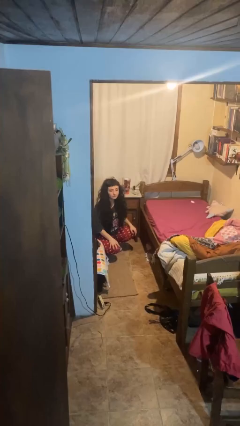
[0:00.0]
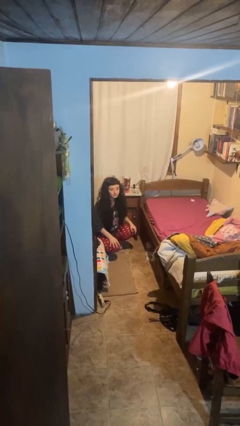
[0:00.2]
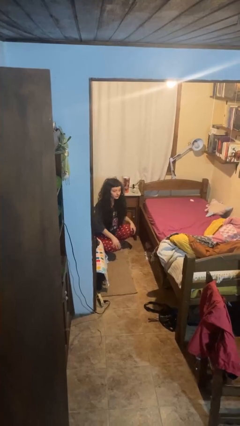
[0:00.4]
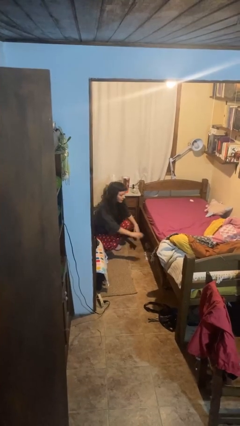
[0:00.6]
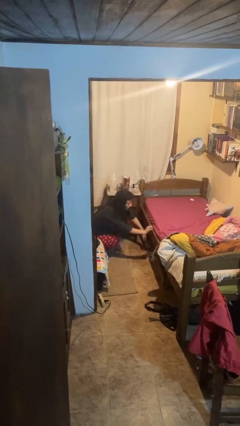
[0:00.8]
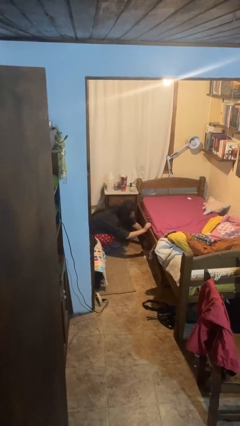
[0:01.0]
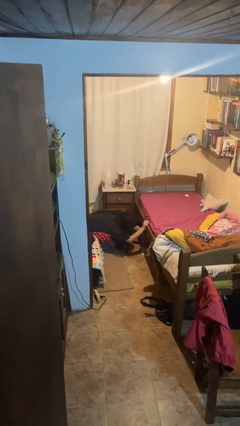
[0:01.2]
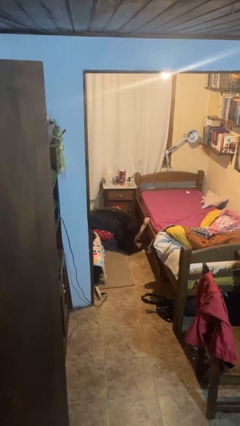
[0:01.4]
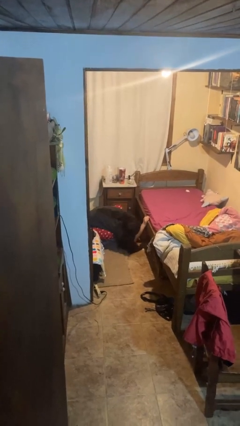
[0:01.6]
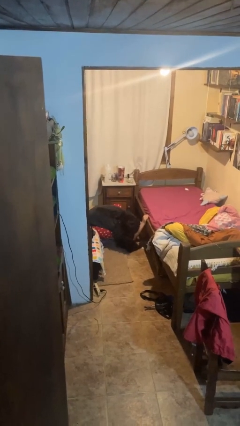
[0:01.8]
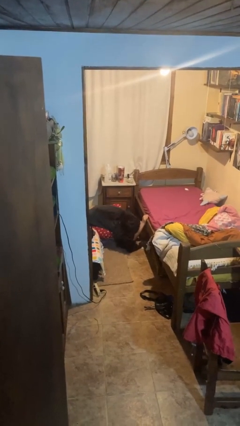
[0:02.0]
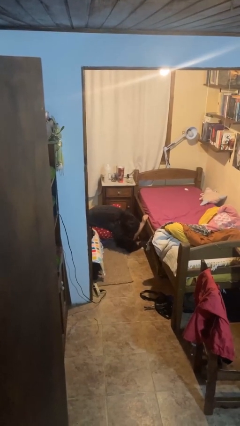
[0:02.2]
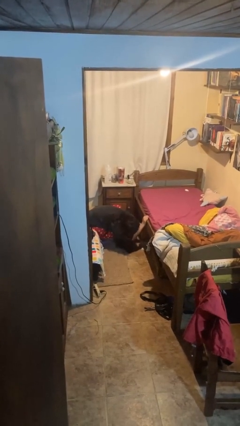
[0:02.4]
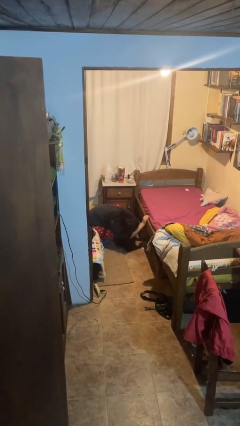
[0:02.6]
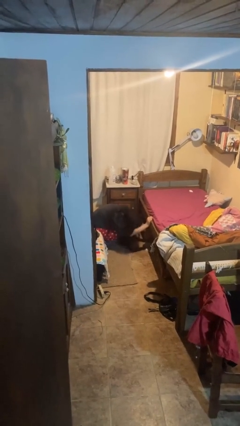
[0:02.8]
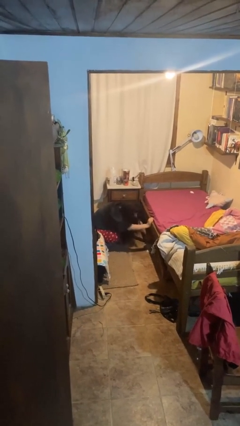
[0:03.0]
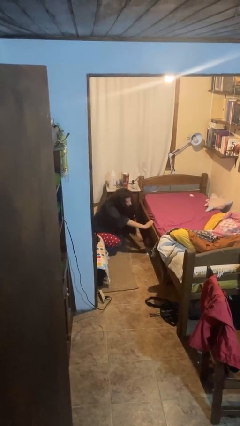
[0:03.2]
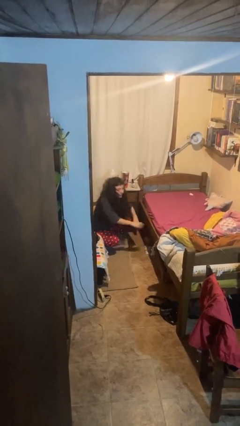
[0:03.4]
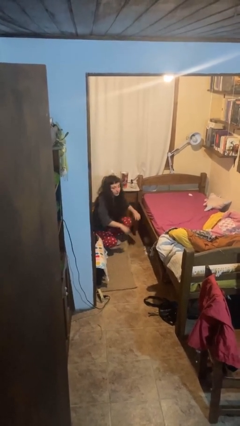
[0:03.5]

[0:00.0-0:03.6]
person searches under bed

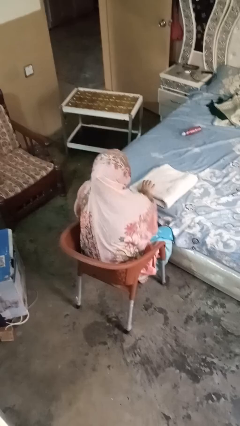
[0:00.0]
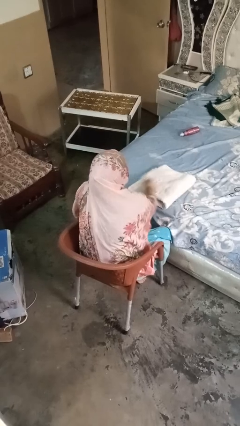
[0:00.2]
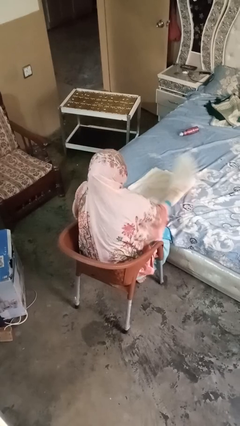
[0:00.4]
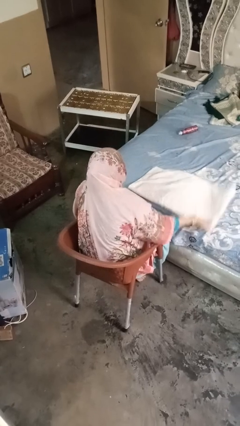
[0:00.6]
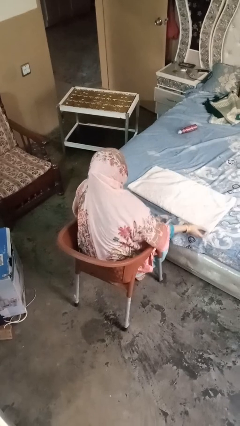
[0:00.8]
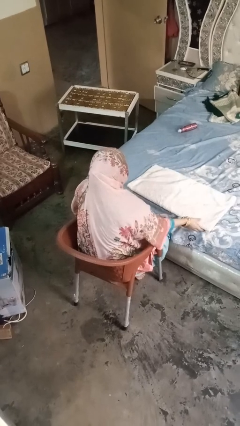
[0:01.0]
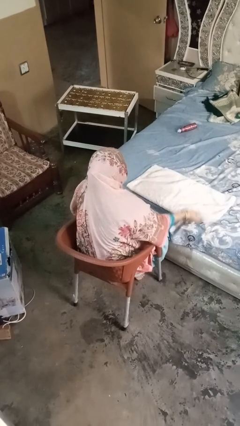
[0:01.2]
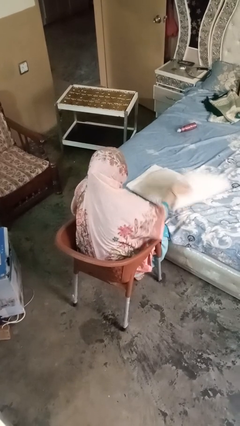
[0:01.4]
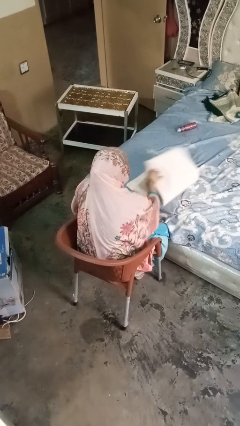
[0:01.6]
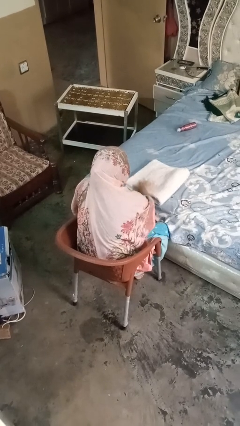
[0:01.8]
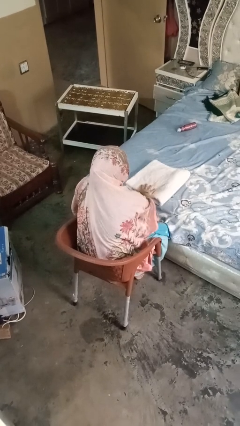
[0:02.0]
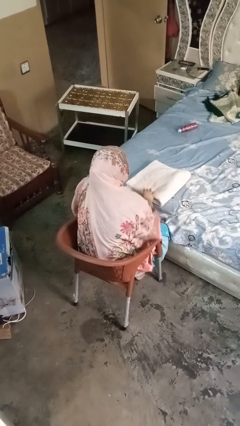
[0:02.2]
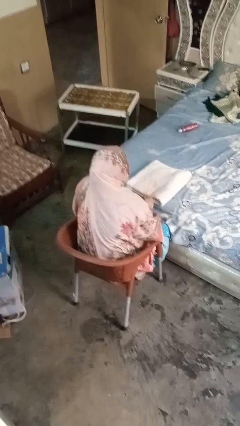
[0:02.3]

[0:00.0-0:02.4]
person folds towel

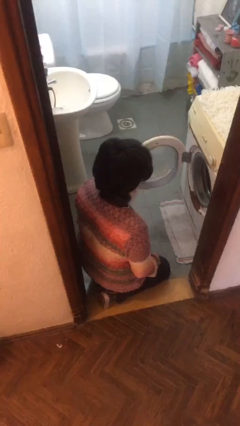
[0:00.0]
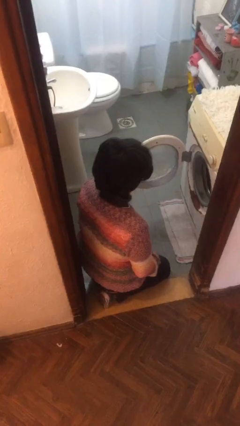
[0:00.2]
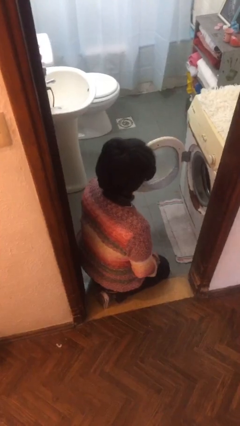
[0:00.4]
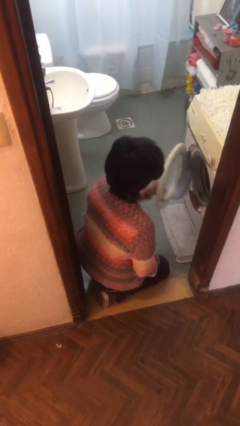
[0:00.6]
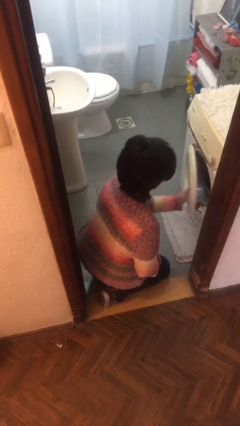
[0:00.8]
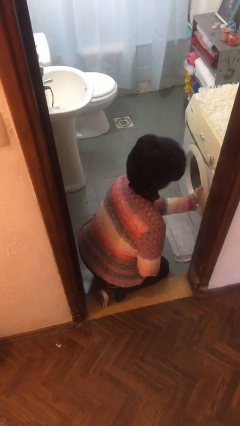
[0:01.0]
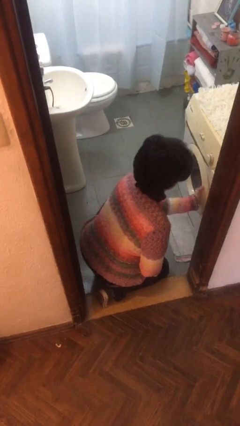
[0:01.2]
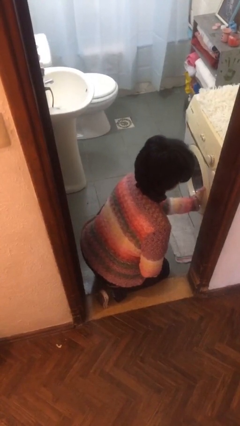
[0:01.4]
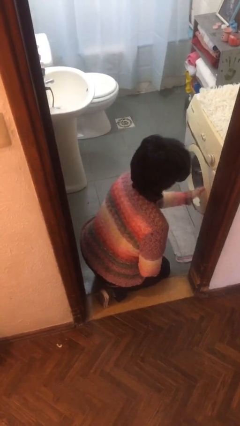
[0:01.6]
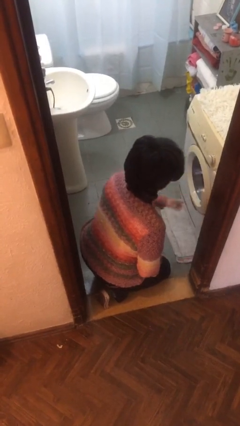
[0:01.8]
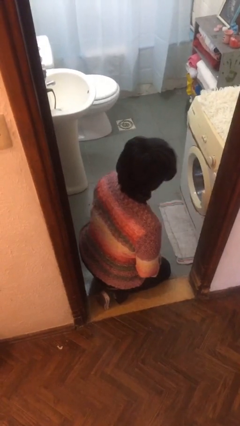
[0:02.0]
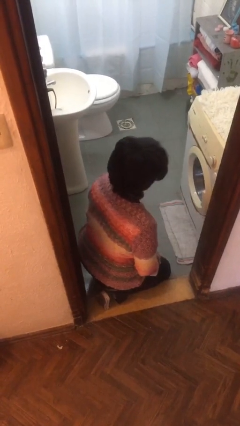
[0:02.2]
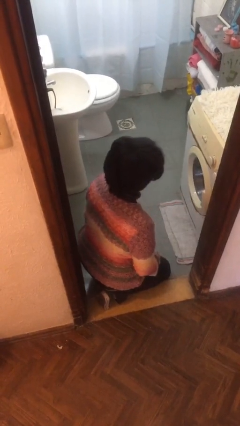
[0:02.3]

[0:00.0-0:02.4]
person closes clothes washer

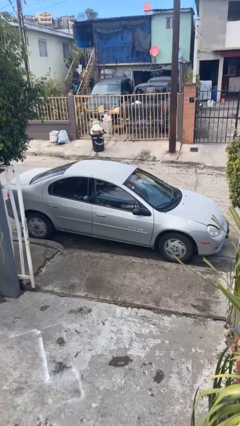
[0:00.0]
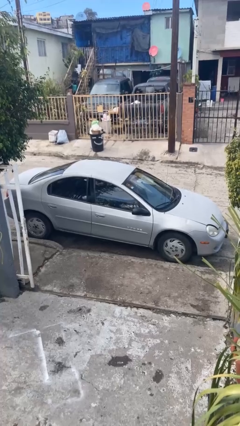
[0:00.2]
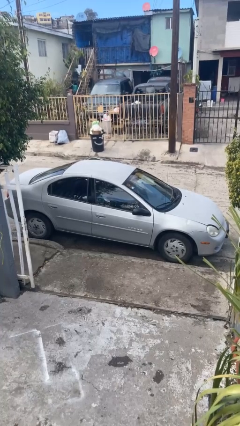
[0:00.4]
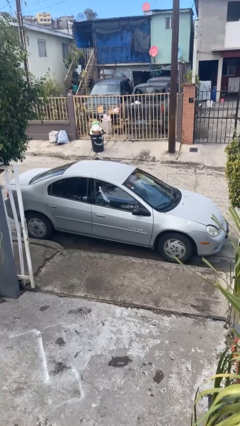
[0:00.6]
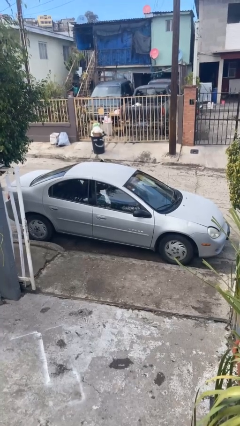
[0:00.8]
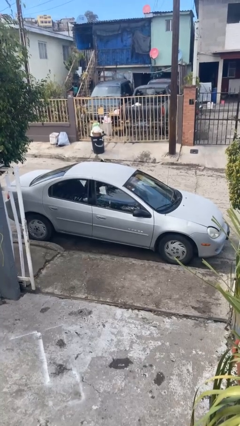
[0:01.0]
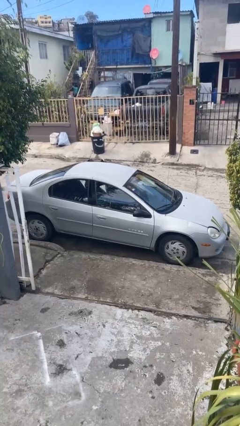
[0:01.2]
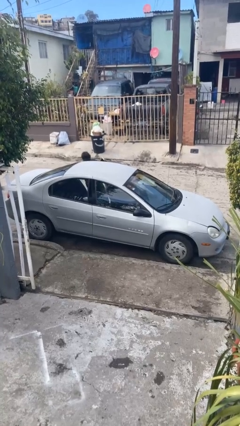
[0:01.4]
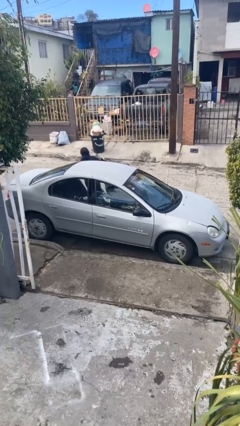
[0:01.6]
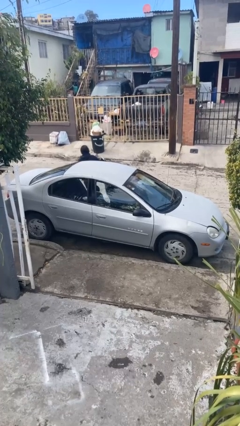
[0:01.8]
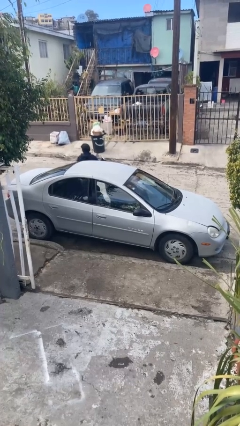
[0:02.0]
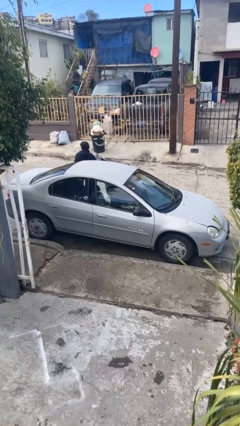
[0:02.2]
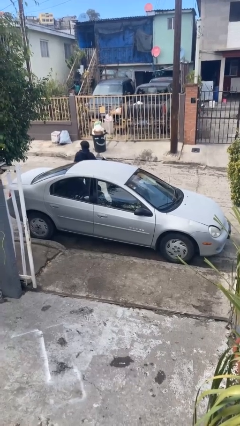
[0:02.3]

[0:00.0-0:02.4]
car drops off person

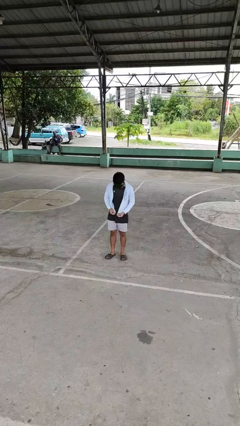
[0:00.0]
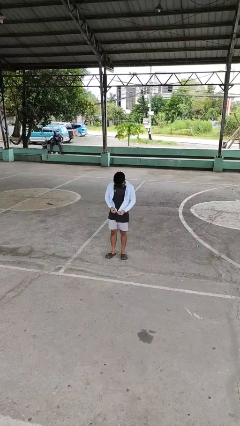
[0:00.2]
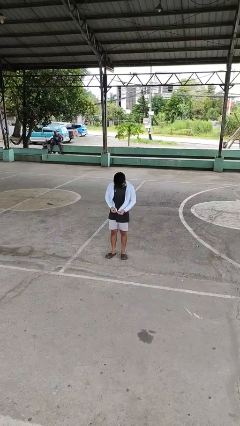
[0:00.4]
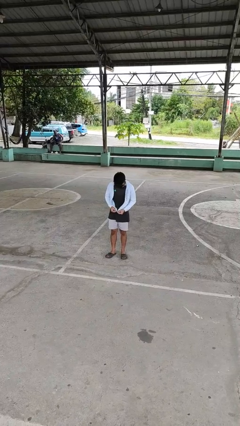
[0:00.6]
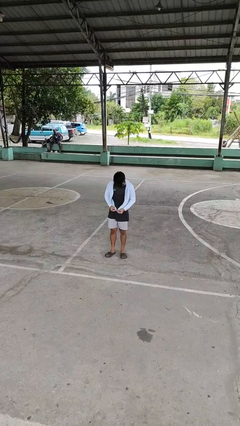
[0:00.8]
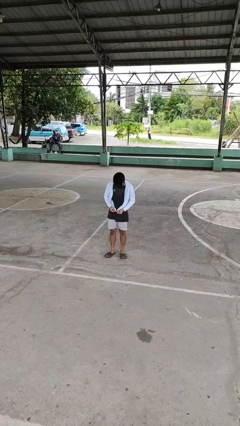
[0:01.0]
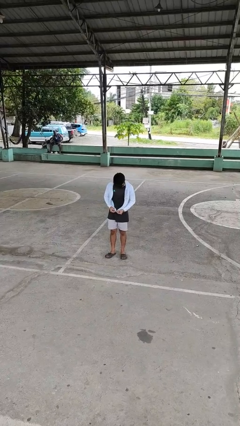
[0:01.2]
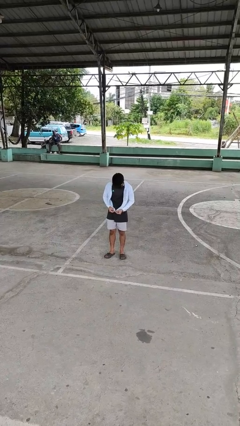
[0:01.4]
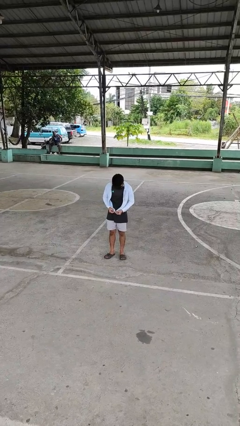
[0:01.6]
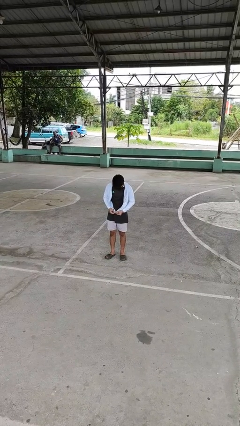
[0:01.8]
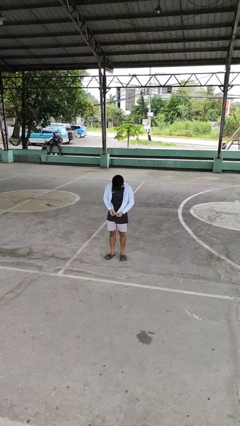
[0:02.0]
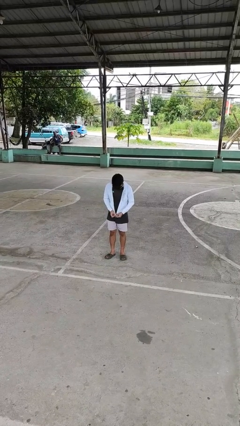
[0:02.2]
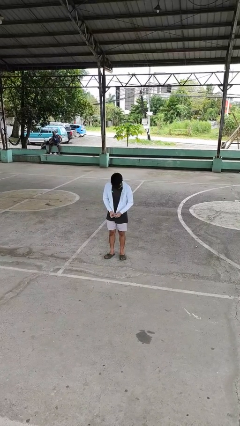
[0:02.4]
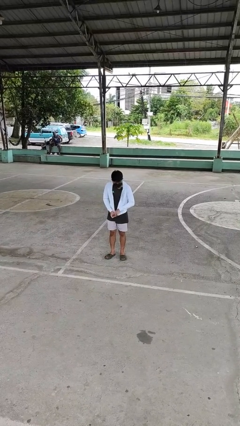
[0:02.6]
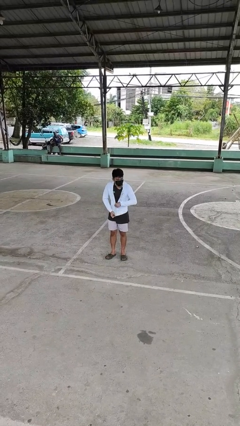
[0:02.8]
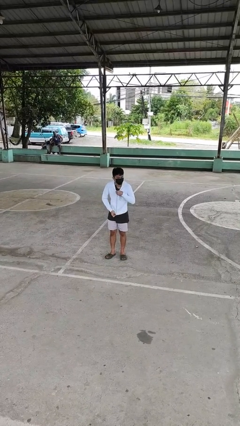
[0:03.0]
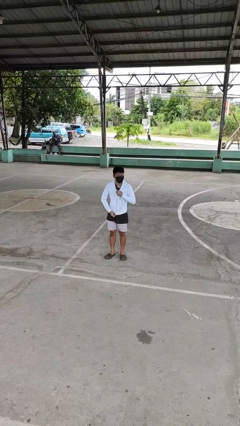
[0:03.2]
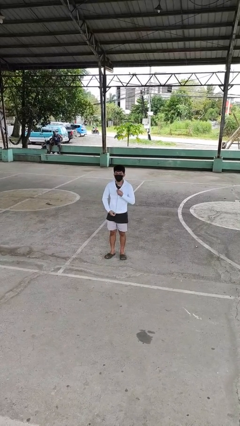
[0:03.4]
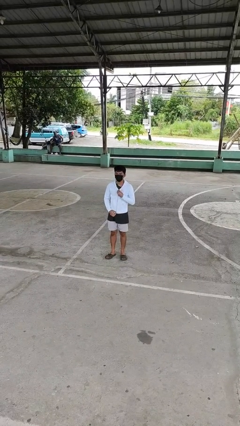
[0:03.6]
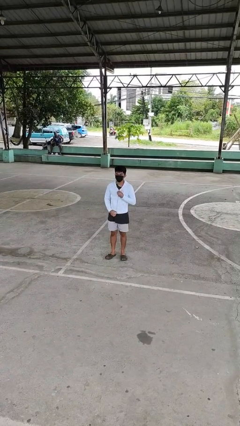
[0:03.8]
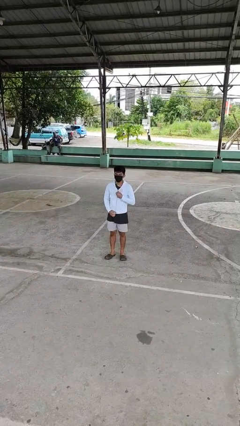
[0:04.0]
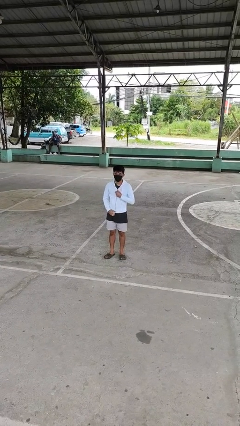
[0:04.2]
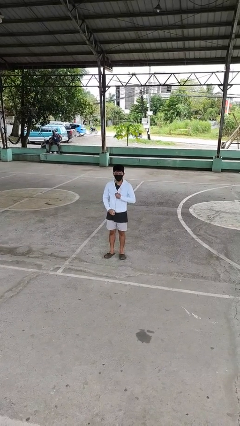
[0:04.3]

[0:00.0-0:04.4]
person zips up jacket

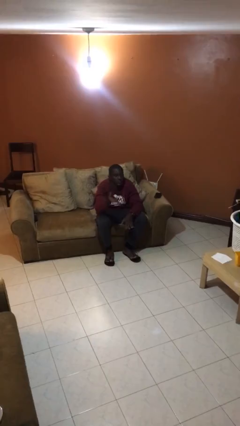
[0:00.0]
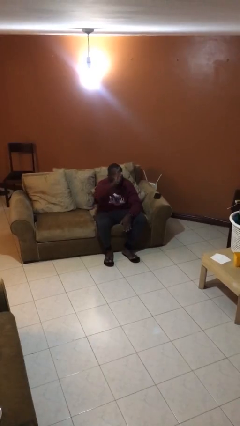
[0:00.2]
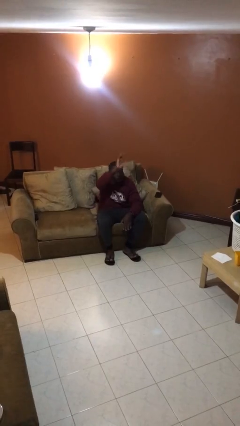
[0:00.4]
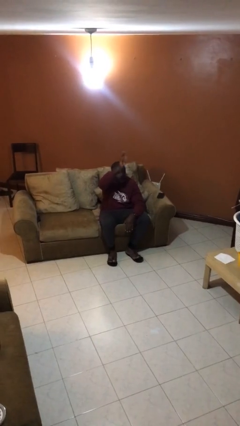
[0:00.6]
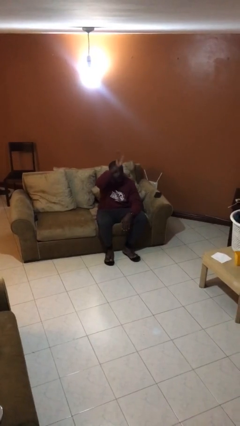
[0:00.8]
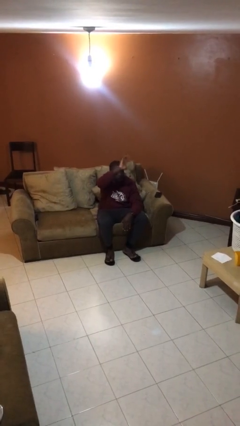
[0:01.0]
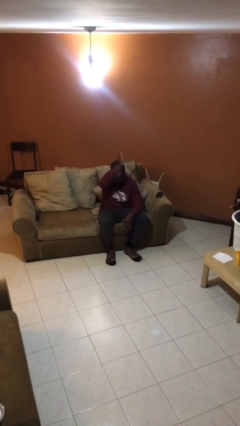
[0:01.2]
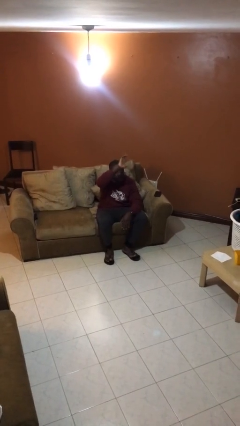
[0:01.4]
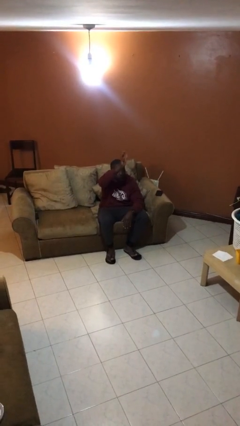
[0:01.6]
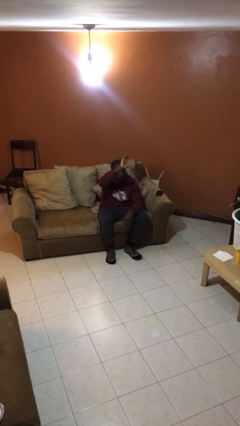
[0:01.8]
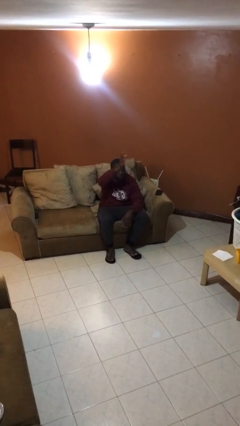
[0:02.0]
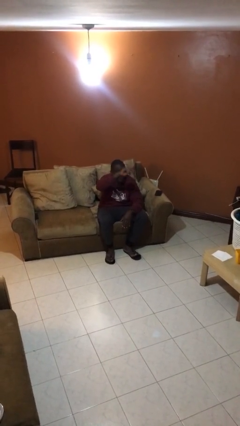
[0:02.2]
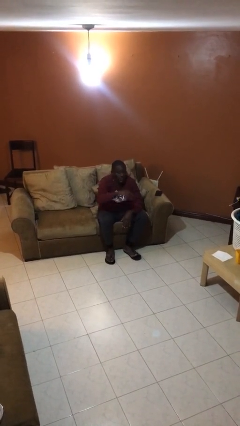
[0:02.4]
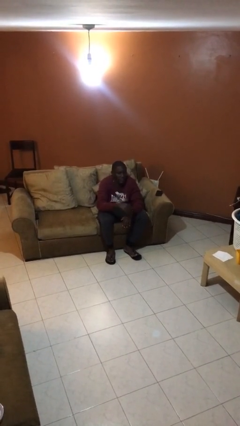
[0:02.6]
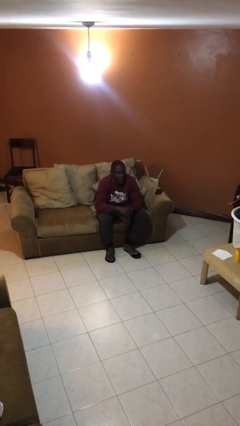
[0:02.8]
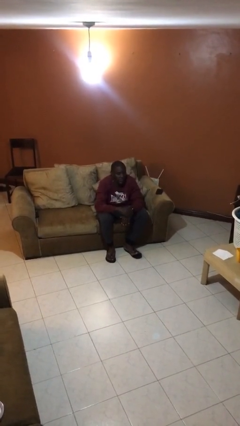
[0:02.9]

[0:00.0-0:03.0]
person waves at person
